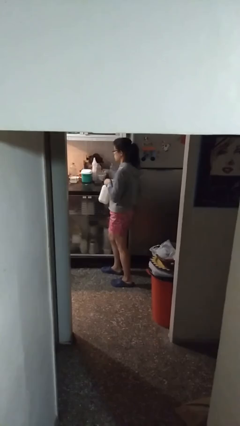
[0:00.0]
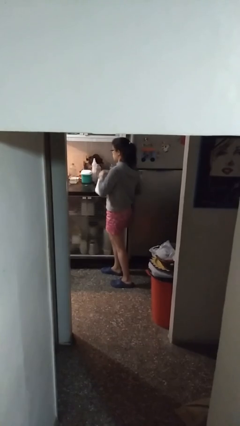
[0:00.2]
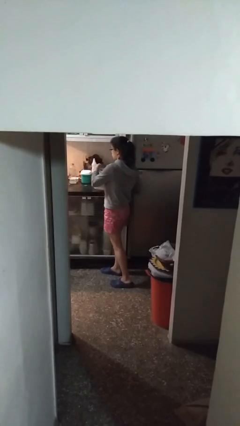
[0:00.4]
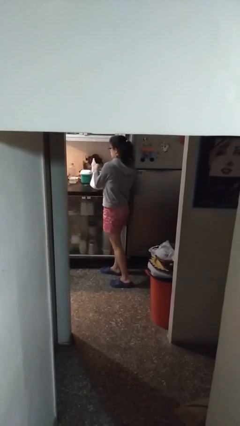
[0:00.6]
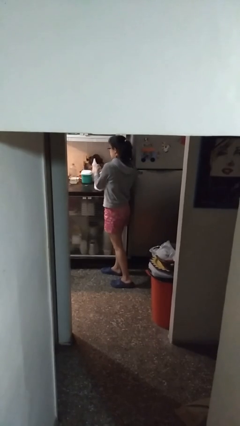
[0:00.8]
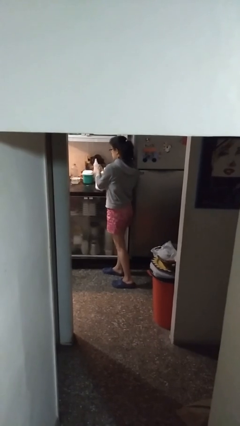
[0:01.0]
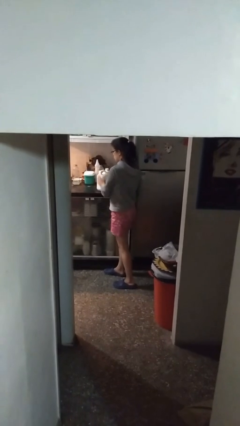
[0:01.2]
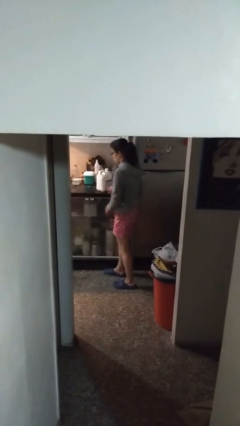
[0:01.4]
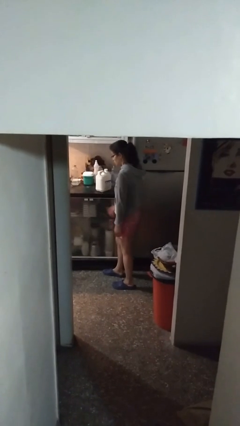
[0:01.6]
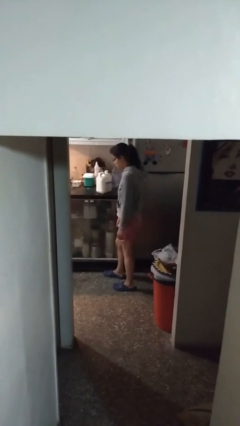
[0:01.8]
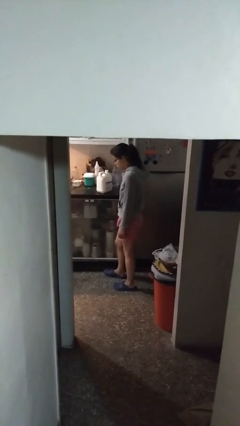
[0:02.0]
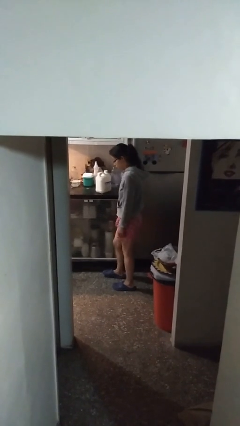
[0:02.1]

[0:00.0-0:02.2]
person puts down object on countertop

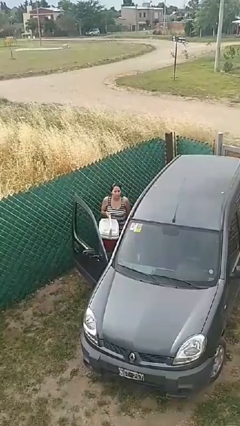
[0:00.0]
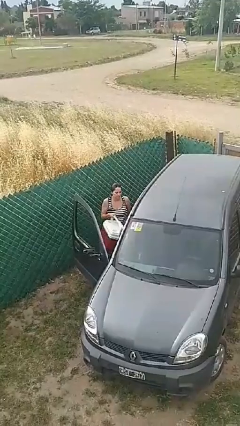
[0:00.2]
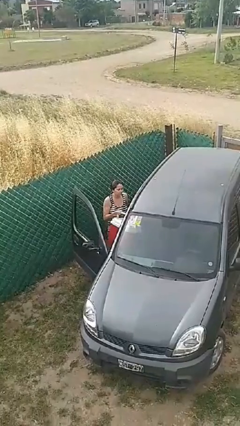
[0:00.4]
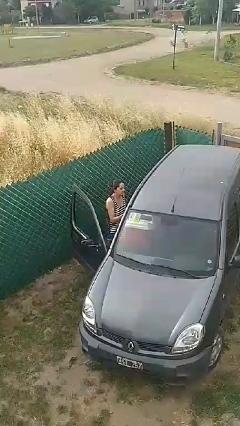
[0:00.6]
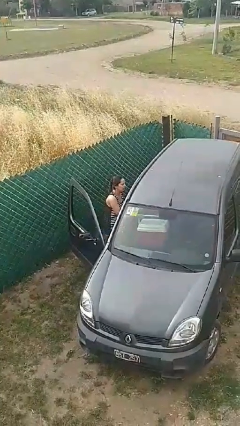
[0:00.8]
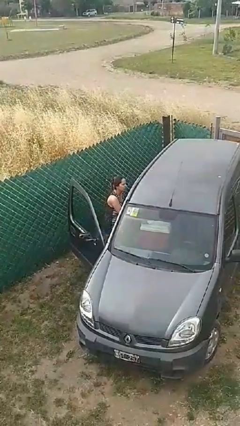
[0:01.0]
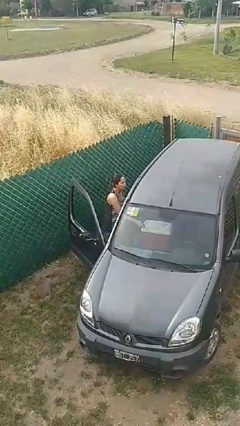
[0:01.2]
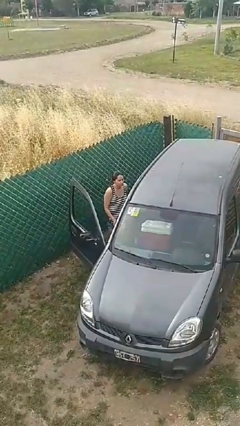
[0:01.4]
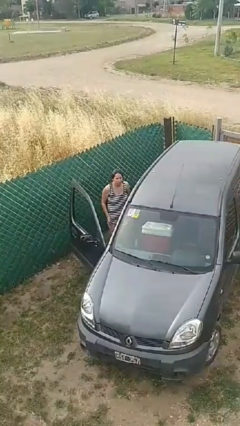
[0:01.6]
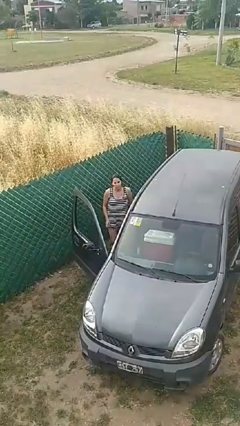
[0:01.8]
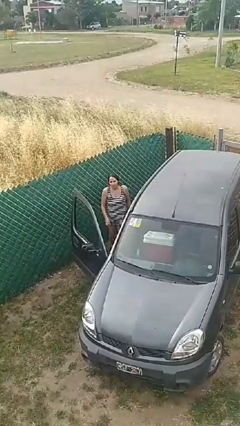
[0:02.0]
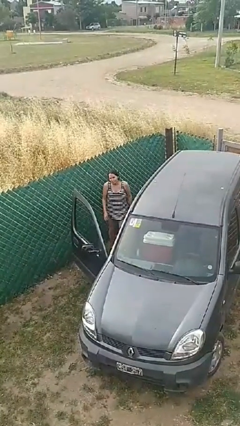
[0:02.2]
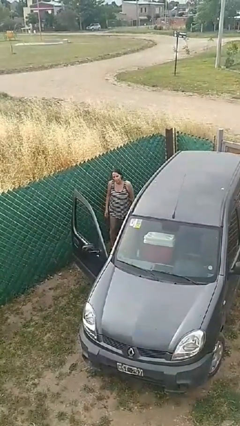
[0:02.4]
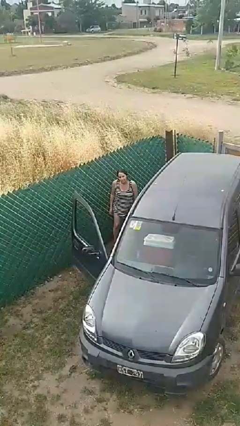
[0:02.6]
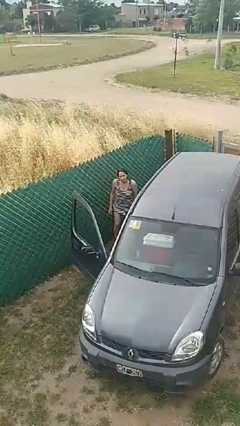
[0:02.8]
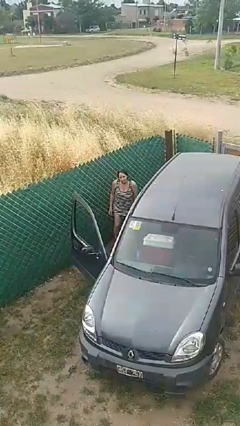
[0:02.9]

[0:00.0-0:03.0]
person loads car

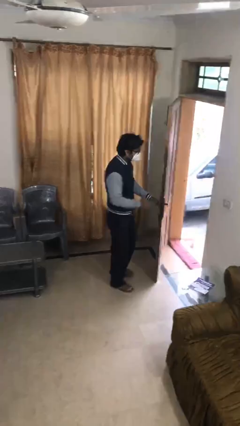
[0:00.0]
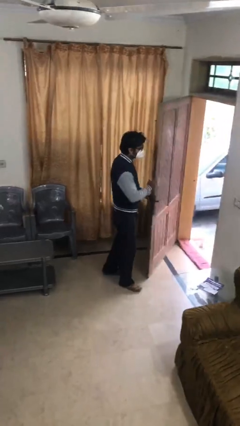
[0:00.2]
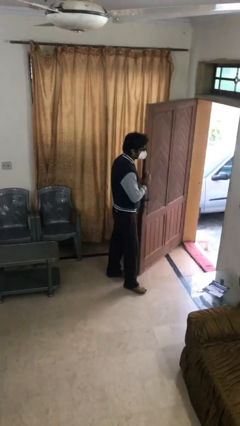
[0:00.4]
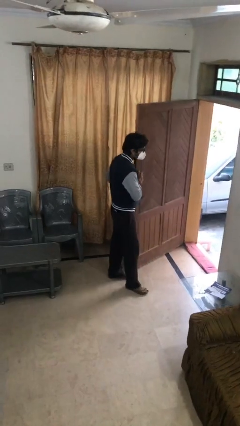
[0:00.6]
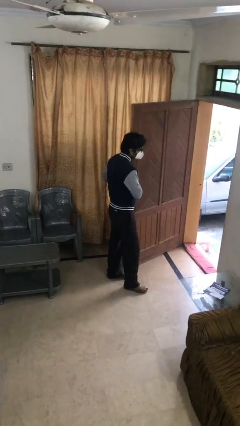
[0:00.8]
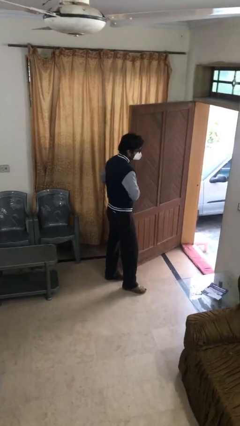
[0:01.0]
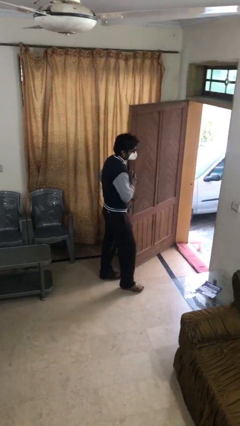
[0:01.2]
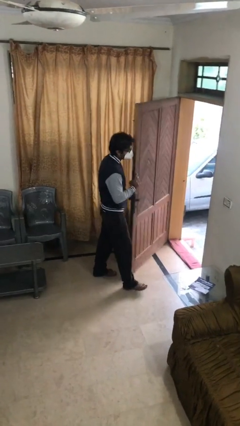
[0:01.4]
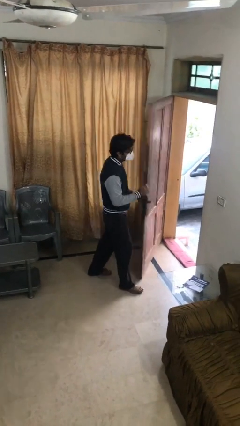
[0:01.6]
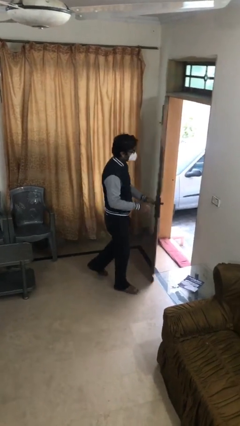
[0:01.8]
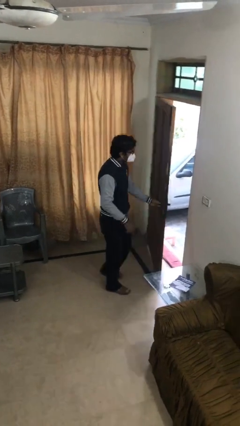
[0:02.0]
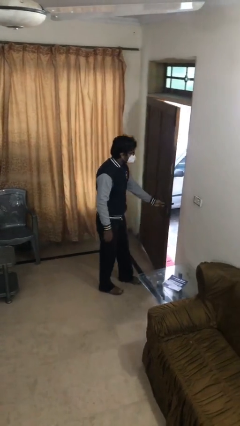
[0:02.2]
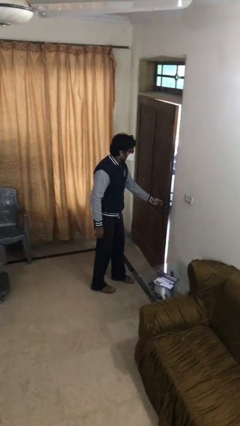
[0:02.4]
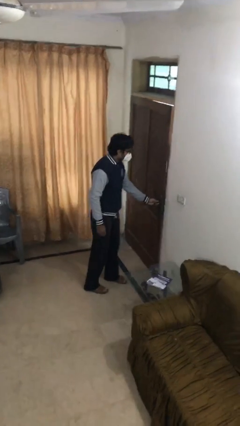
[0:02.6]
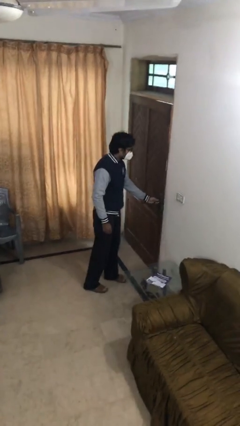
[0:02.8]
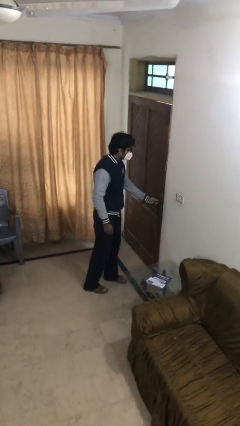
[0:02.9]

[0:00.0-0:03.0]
person closes facility door

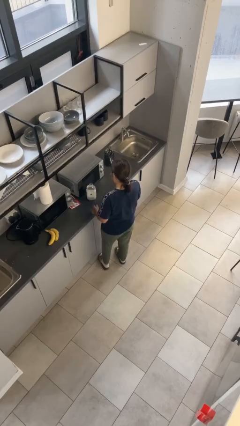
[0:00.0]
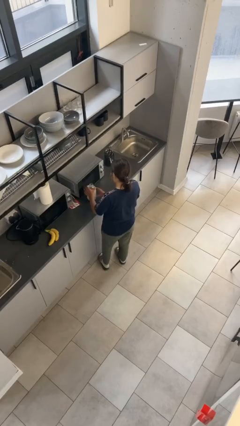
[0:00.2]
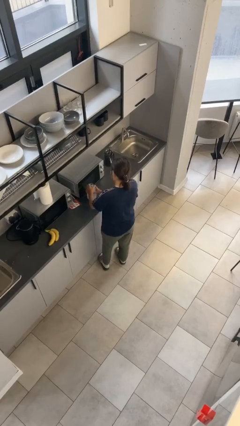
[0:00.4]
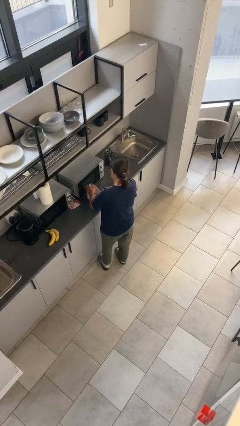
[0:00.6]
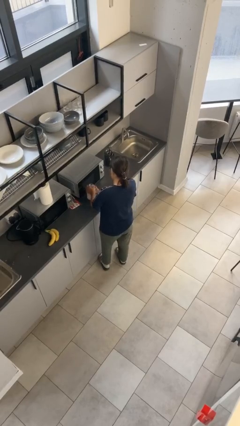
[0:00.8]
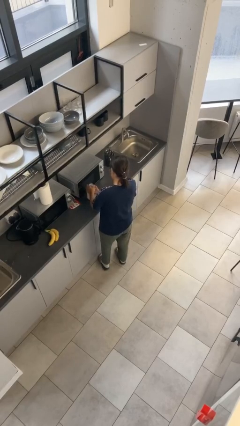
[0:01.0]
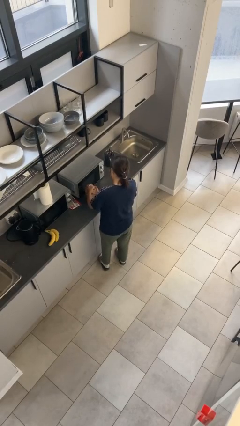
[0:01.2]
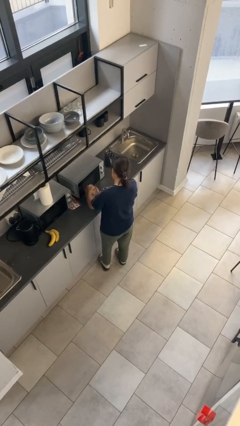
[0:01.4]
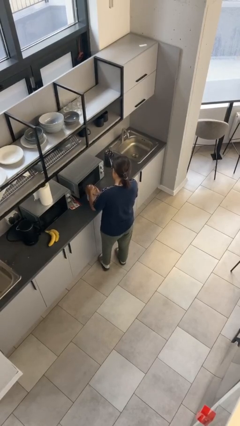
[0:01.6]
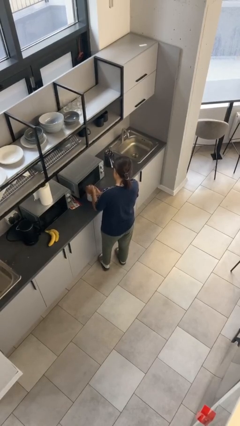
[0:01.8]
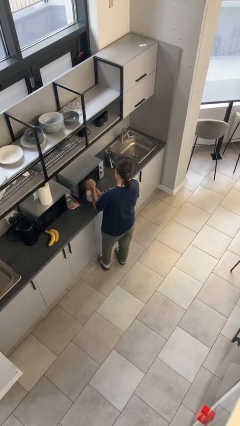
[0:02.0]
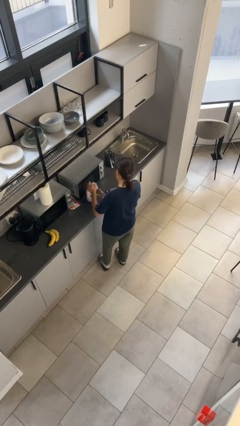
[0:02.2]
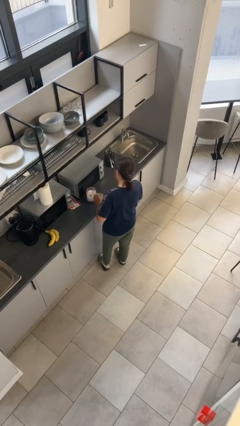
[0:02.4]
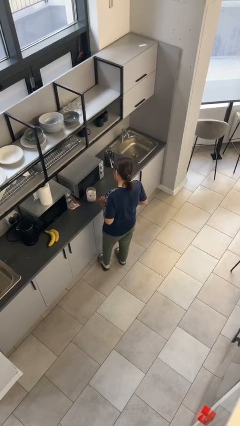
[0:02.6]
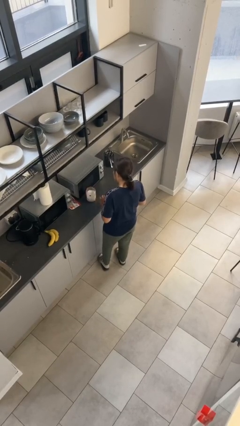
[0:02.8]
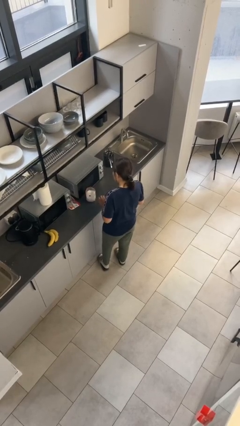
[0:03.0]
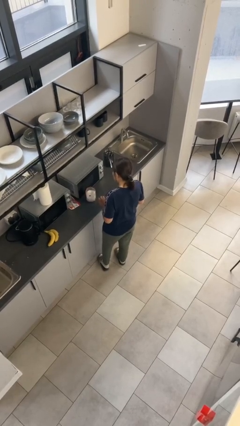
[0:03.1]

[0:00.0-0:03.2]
person opens jar

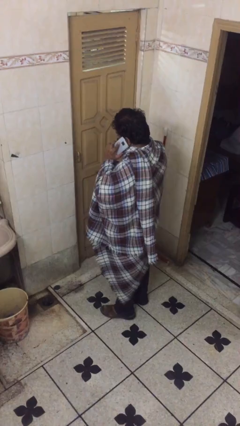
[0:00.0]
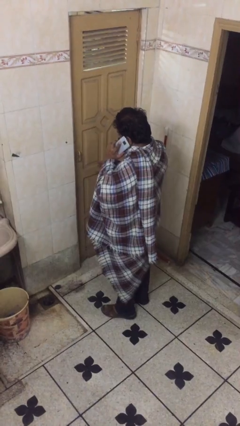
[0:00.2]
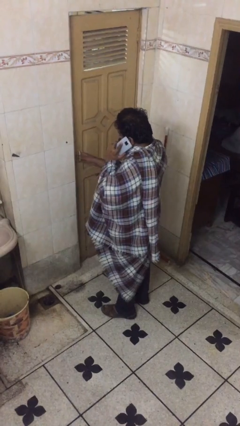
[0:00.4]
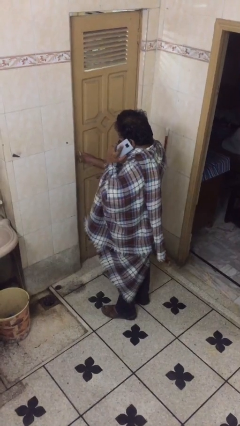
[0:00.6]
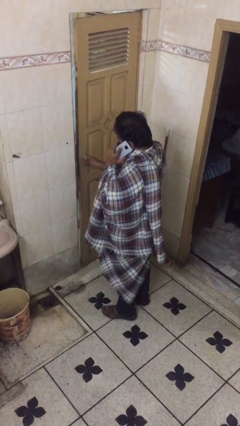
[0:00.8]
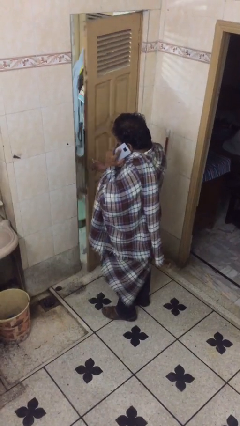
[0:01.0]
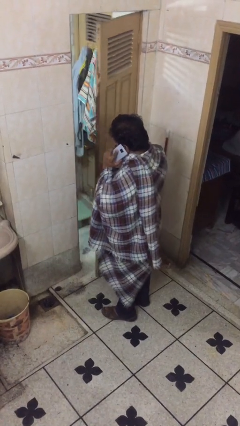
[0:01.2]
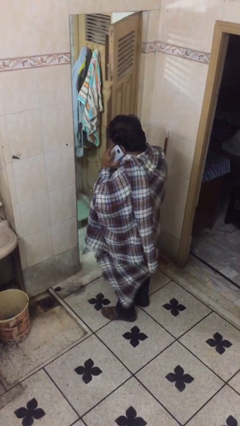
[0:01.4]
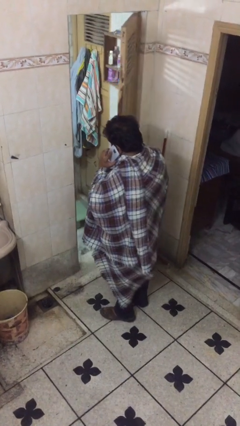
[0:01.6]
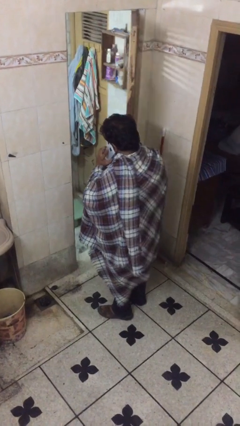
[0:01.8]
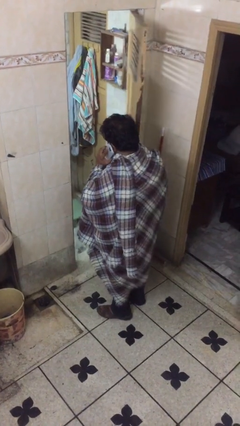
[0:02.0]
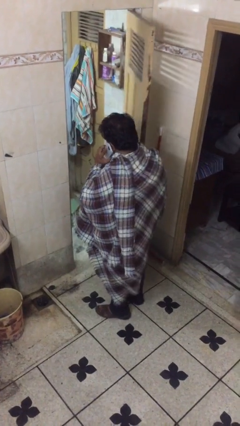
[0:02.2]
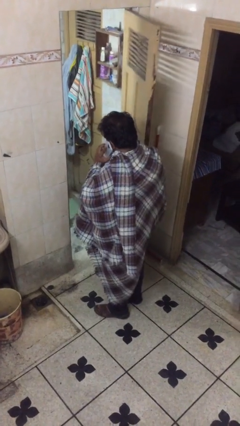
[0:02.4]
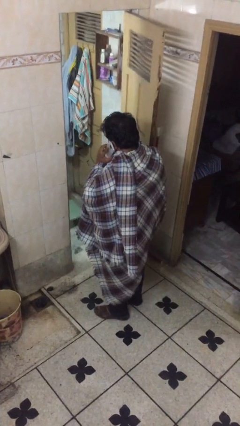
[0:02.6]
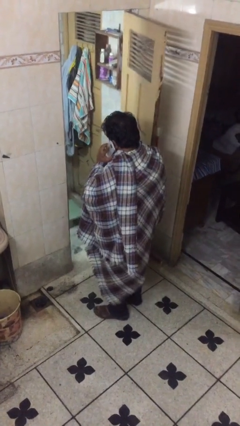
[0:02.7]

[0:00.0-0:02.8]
person opens facility door

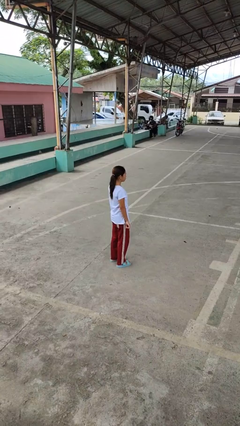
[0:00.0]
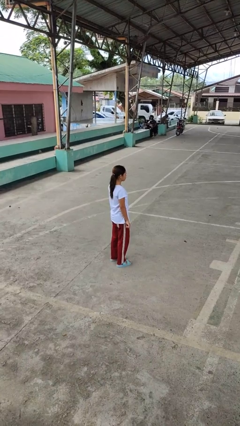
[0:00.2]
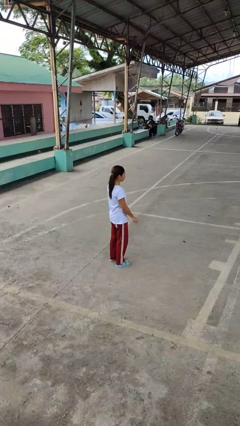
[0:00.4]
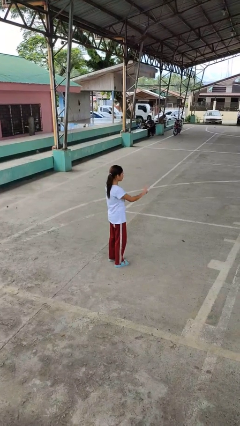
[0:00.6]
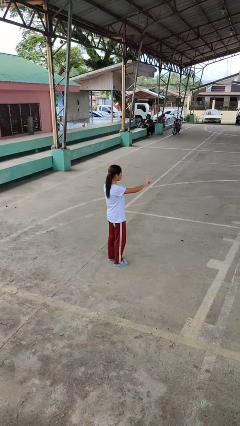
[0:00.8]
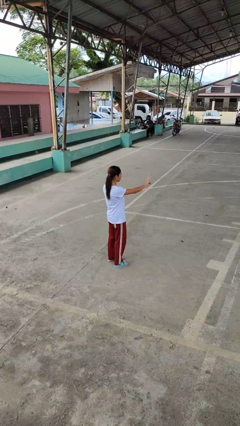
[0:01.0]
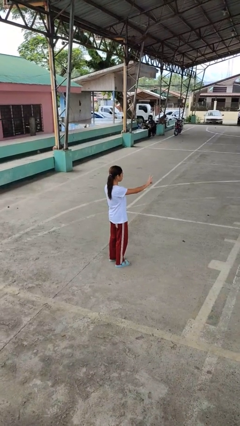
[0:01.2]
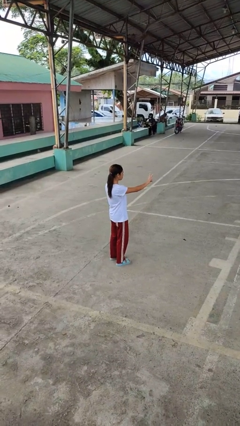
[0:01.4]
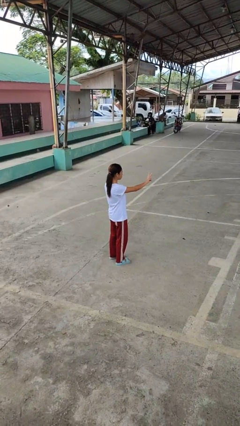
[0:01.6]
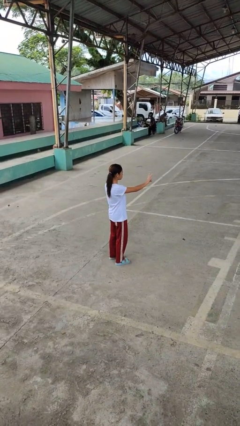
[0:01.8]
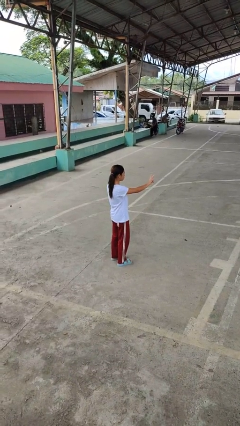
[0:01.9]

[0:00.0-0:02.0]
person gestures peace

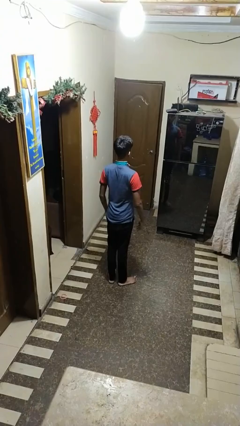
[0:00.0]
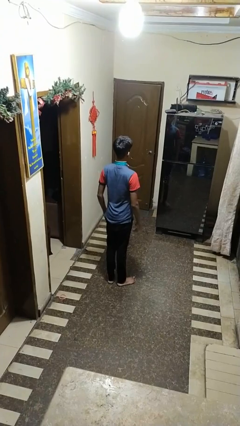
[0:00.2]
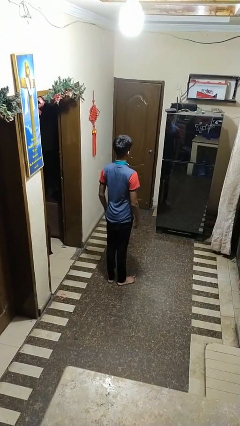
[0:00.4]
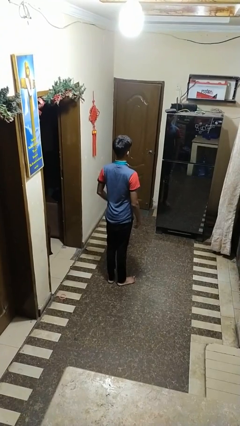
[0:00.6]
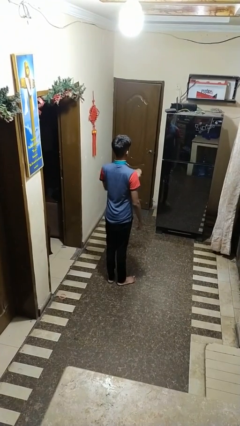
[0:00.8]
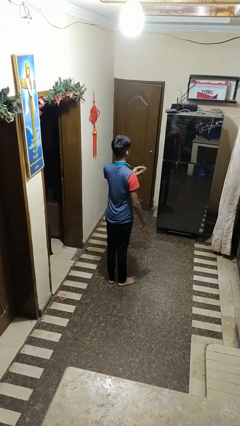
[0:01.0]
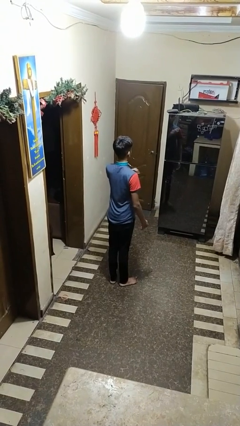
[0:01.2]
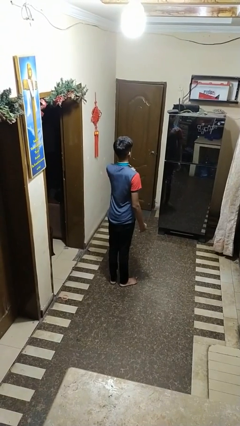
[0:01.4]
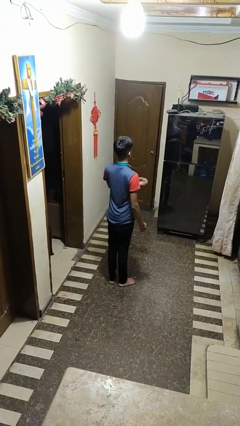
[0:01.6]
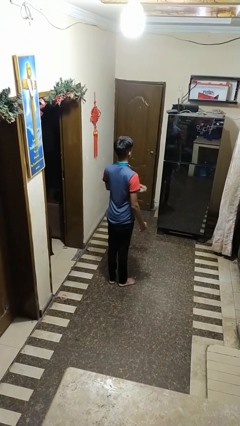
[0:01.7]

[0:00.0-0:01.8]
person drums on chest
